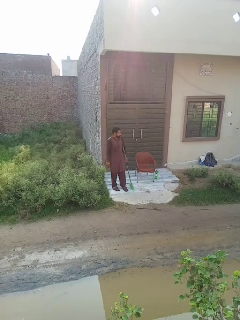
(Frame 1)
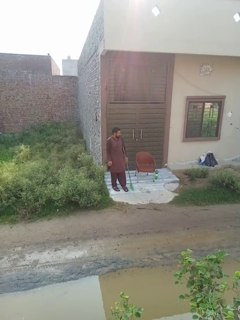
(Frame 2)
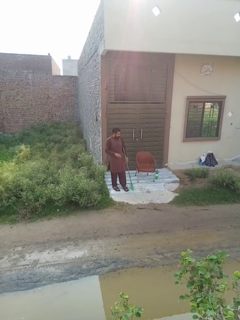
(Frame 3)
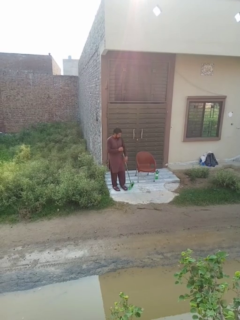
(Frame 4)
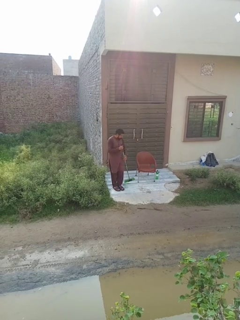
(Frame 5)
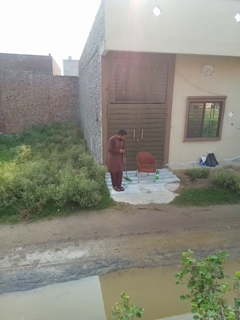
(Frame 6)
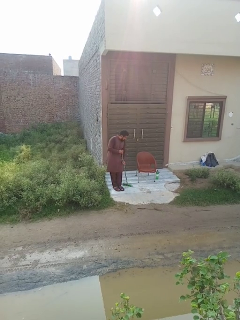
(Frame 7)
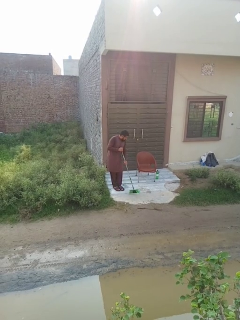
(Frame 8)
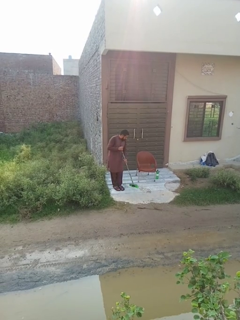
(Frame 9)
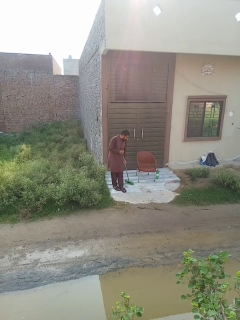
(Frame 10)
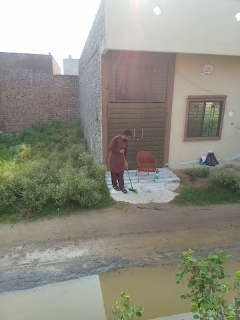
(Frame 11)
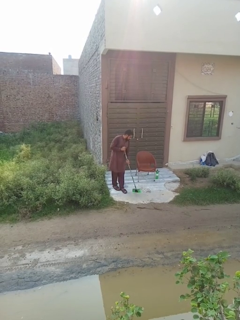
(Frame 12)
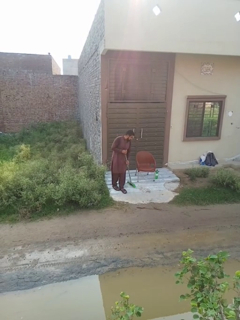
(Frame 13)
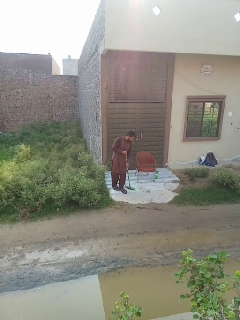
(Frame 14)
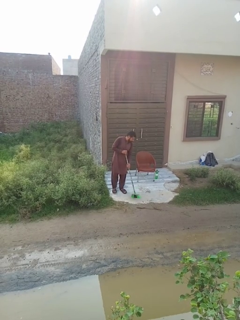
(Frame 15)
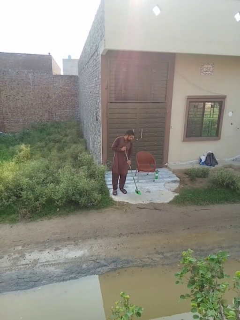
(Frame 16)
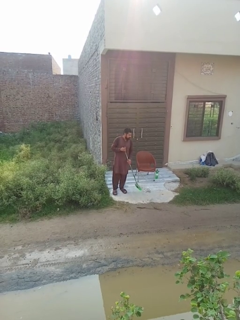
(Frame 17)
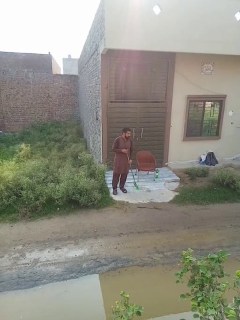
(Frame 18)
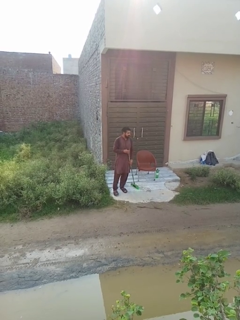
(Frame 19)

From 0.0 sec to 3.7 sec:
person sweeps floor

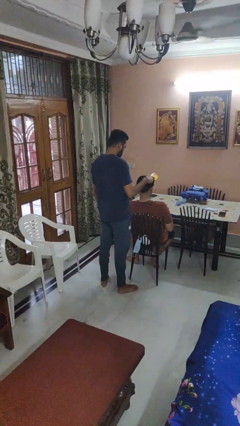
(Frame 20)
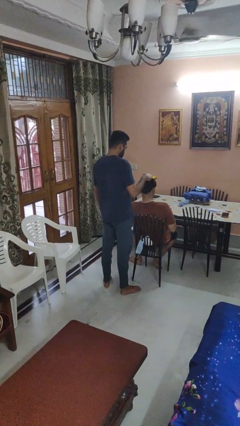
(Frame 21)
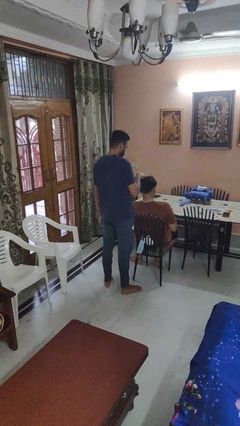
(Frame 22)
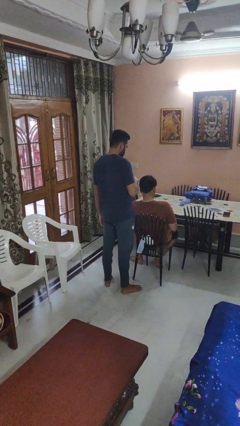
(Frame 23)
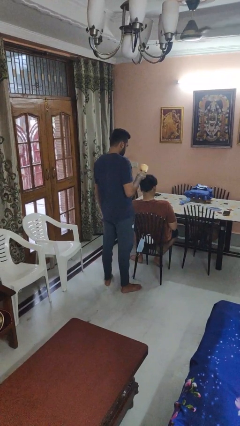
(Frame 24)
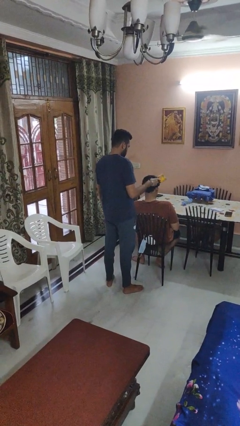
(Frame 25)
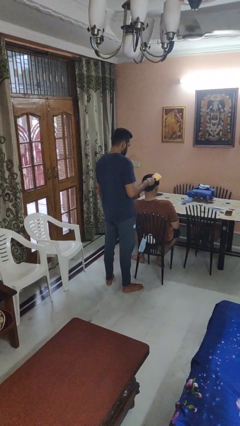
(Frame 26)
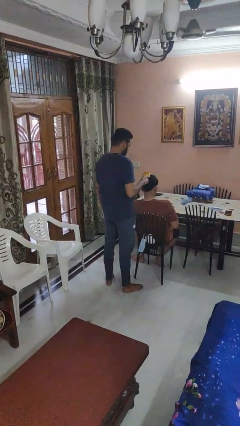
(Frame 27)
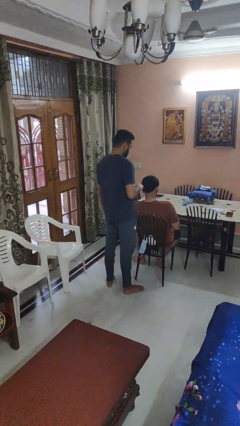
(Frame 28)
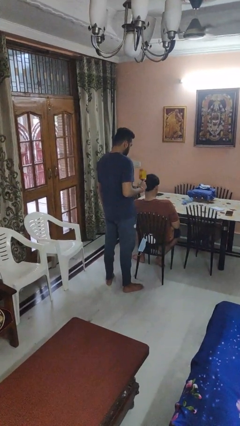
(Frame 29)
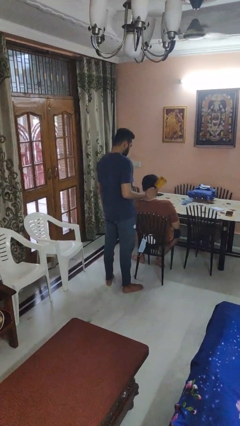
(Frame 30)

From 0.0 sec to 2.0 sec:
person brushes hair of person

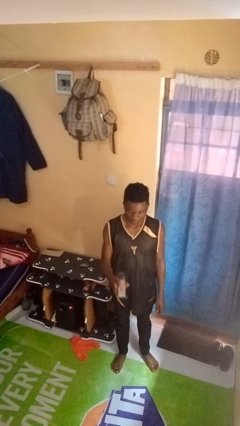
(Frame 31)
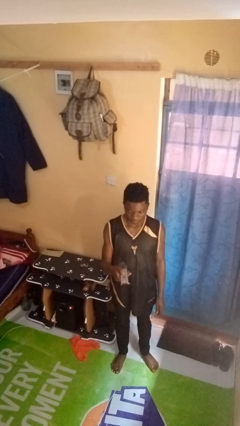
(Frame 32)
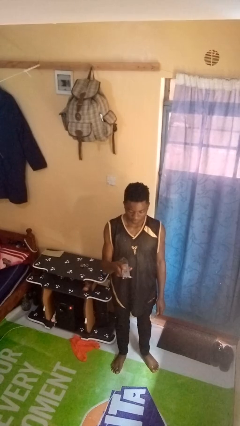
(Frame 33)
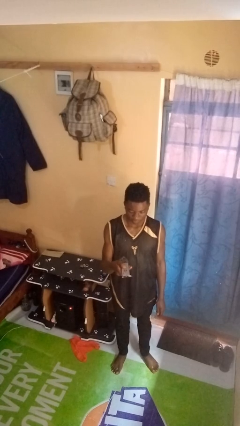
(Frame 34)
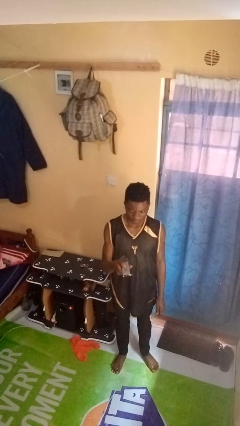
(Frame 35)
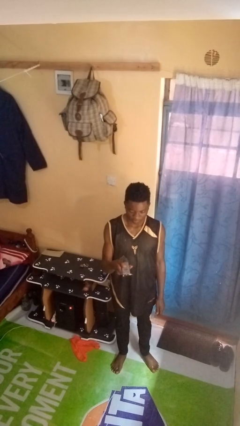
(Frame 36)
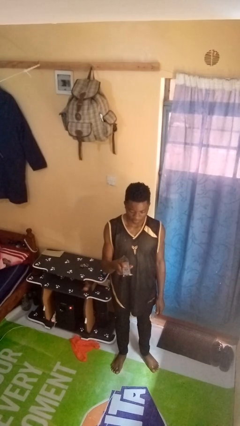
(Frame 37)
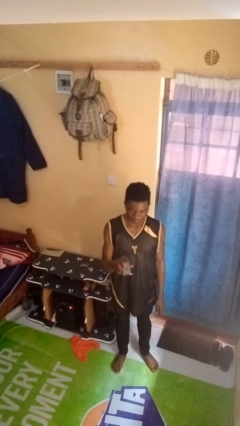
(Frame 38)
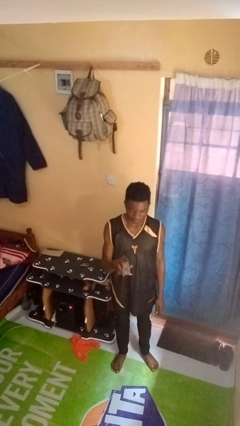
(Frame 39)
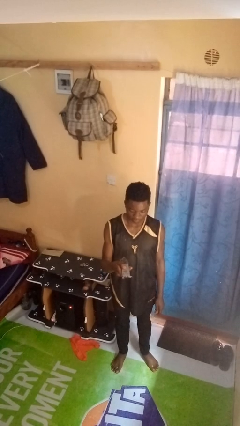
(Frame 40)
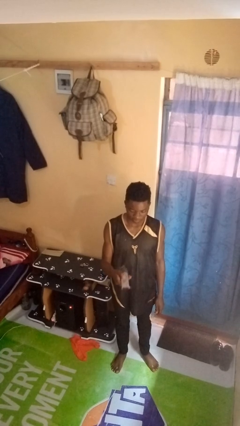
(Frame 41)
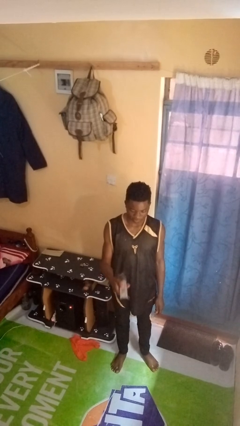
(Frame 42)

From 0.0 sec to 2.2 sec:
person uses television remote

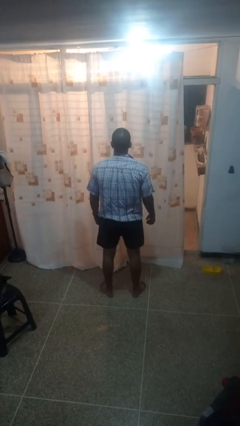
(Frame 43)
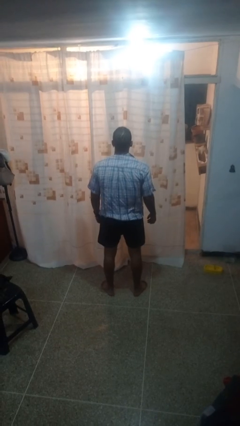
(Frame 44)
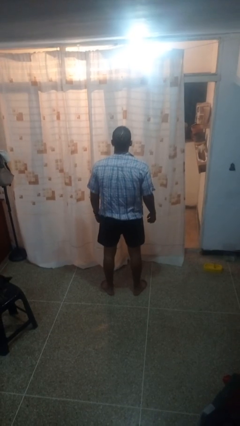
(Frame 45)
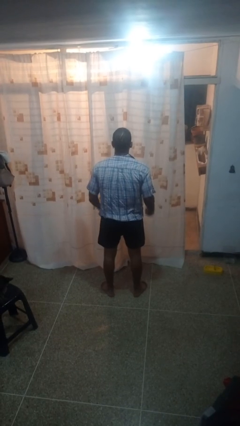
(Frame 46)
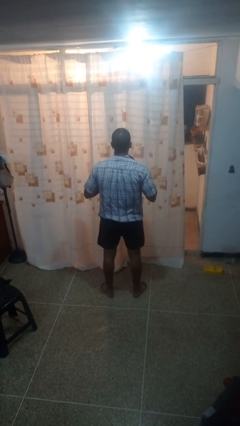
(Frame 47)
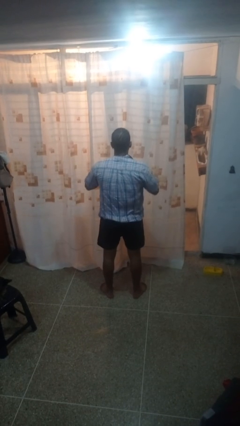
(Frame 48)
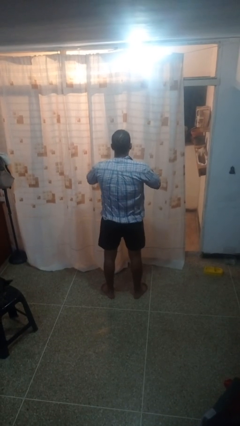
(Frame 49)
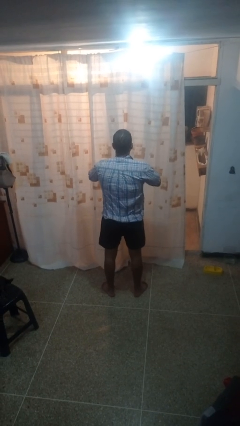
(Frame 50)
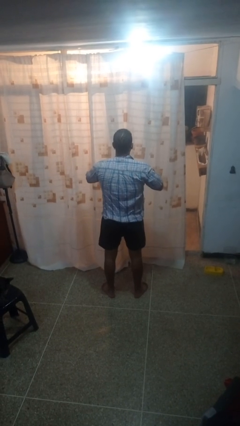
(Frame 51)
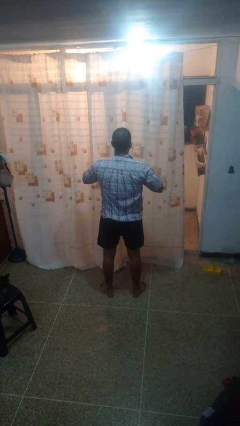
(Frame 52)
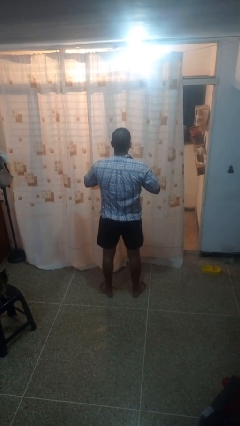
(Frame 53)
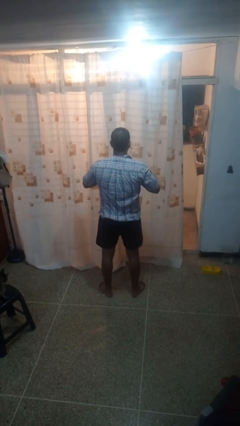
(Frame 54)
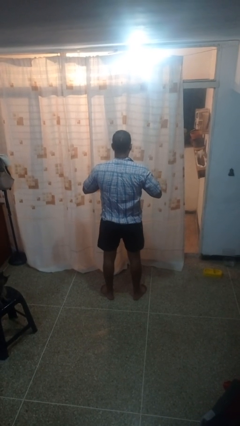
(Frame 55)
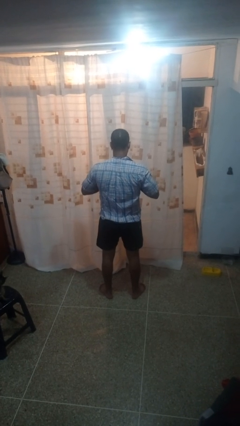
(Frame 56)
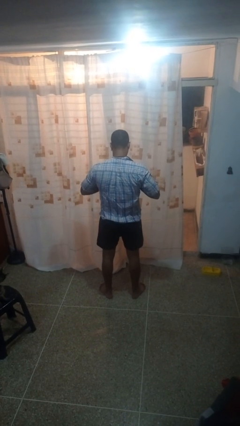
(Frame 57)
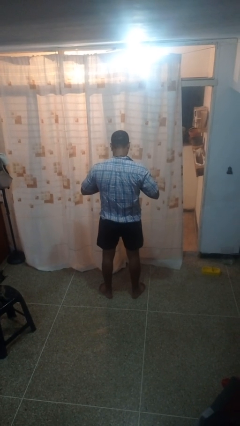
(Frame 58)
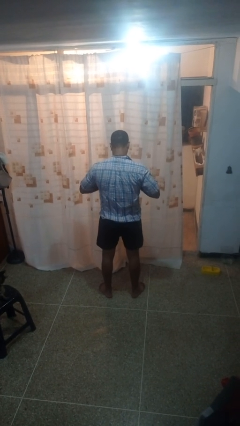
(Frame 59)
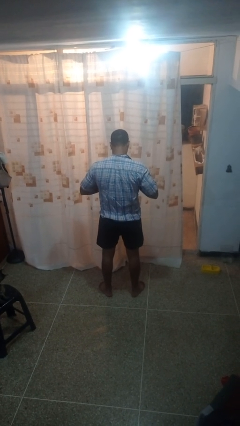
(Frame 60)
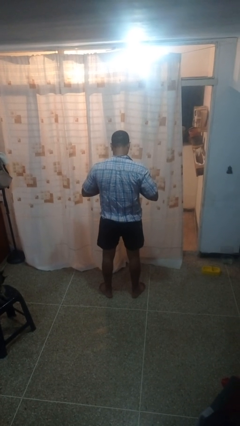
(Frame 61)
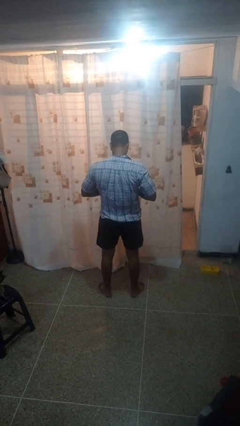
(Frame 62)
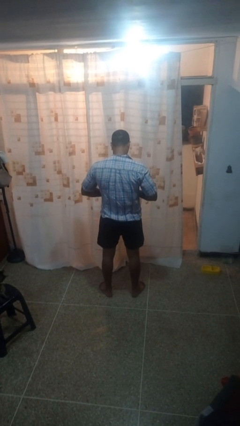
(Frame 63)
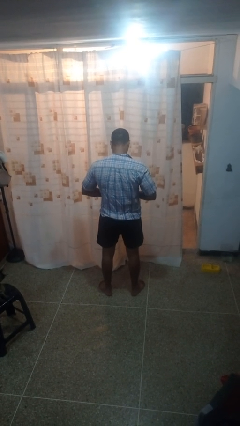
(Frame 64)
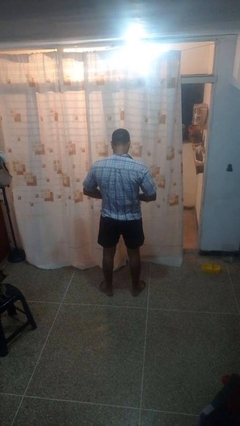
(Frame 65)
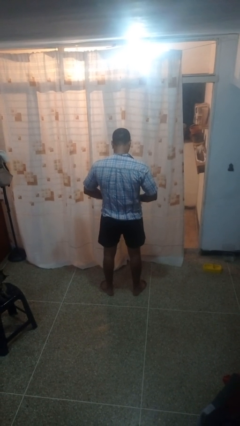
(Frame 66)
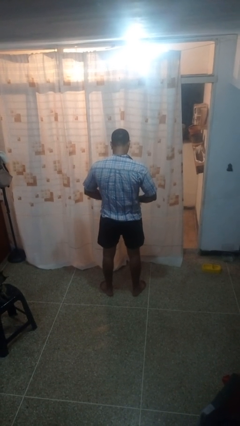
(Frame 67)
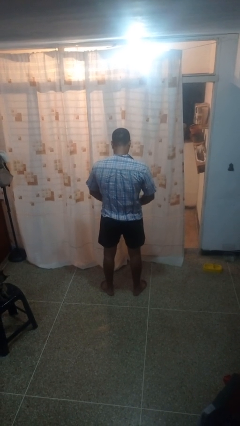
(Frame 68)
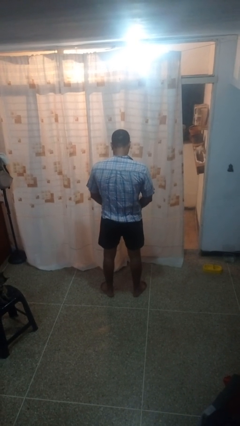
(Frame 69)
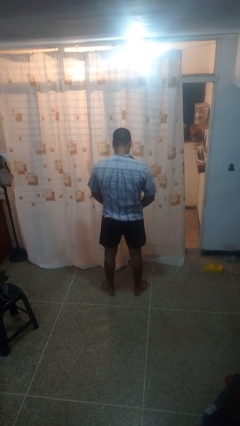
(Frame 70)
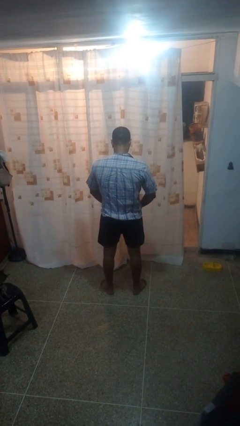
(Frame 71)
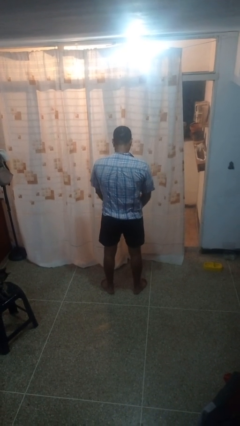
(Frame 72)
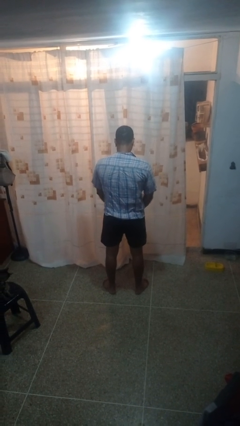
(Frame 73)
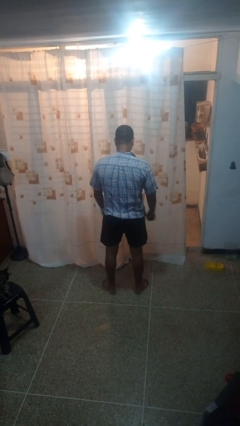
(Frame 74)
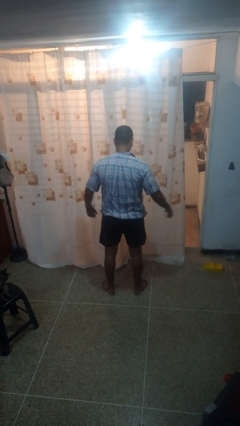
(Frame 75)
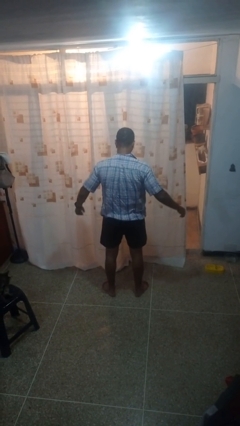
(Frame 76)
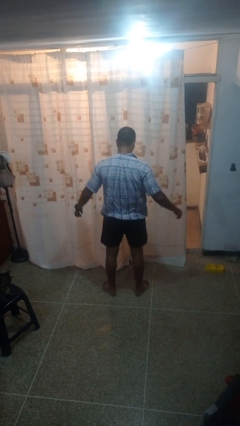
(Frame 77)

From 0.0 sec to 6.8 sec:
person unbuttons shirt

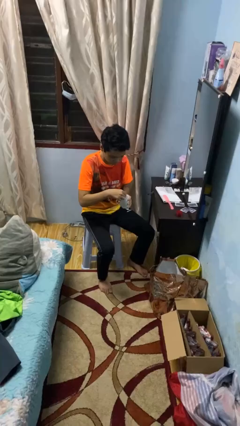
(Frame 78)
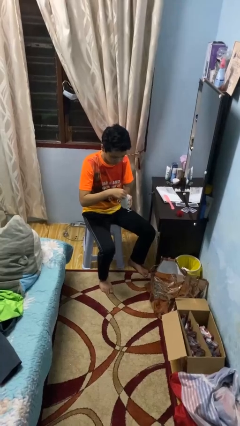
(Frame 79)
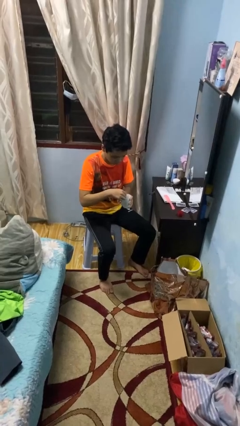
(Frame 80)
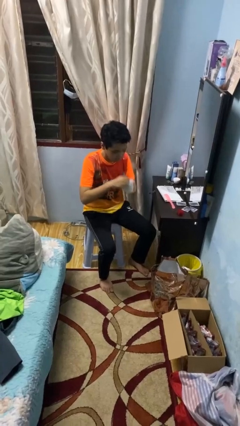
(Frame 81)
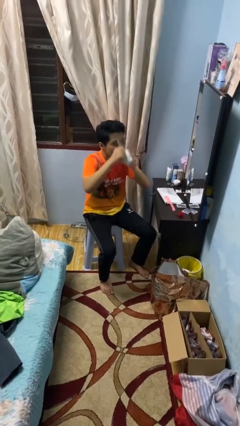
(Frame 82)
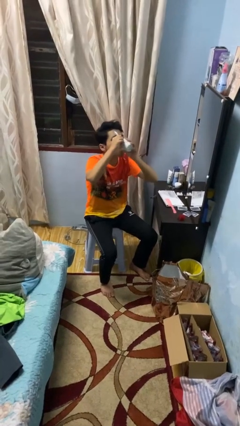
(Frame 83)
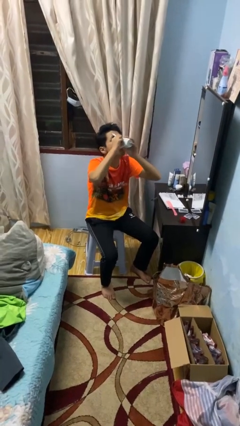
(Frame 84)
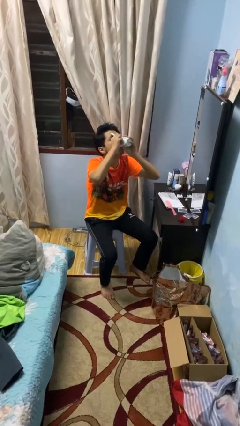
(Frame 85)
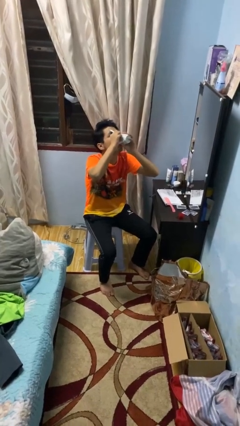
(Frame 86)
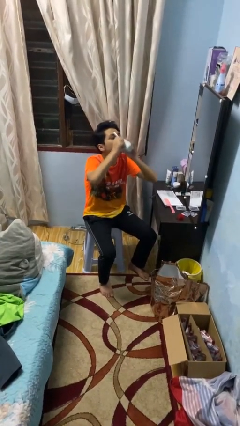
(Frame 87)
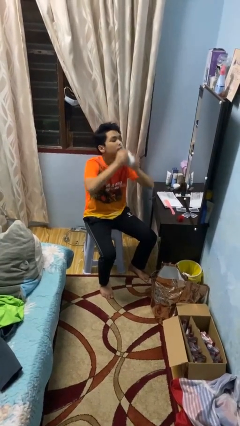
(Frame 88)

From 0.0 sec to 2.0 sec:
person drinks from mug

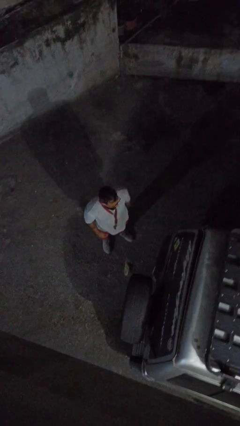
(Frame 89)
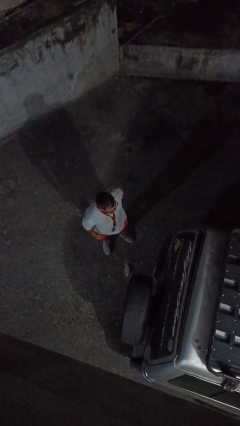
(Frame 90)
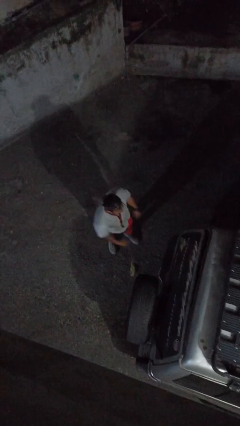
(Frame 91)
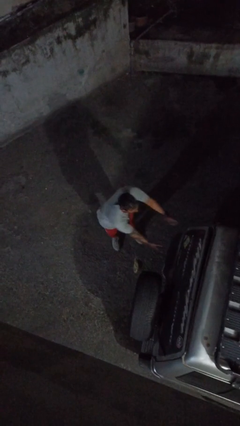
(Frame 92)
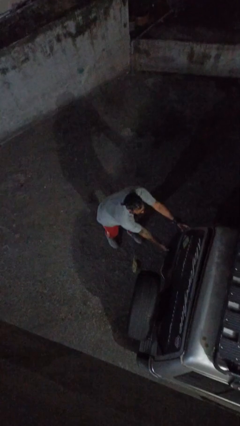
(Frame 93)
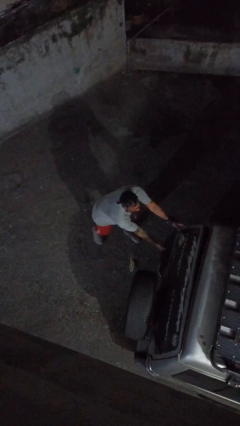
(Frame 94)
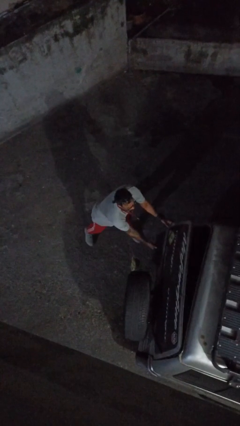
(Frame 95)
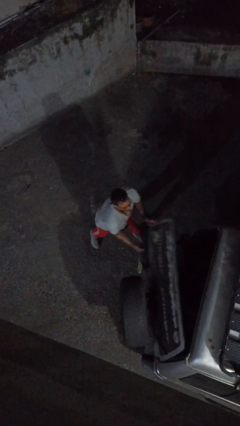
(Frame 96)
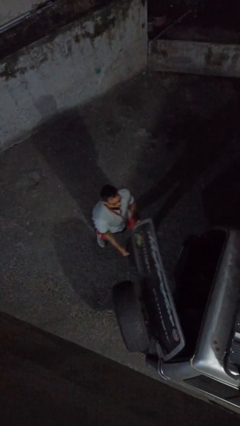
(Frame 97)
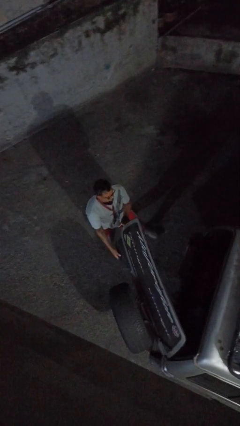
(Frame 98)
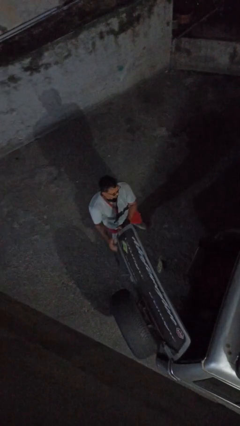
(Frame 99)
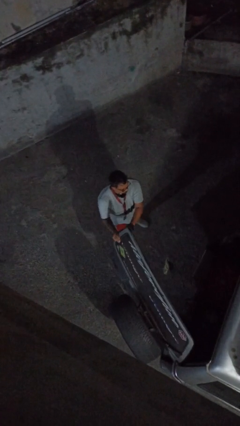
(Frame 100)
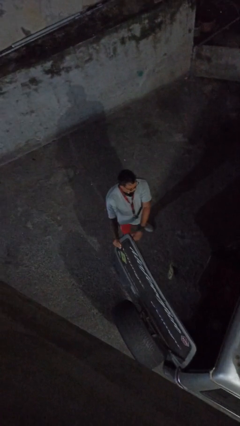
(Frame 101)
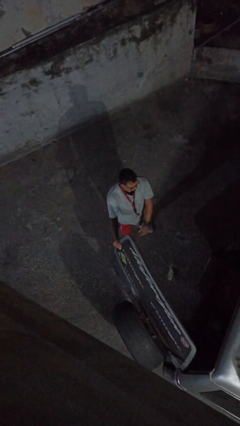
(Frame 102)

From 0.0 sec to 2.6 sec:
person opens car trunk
